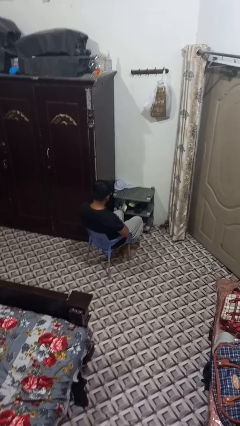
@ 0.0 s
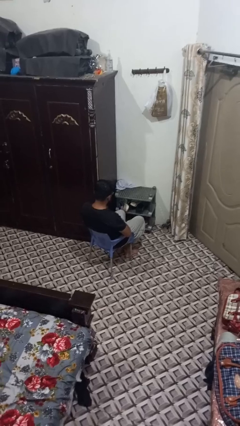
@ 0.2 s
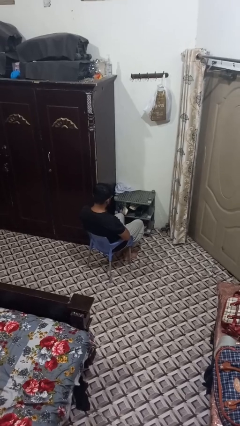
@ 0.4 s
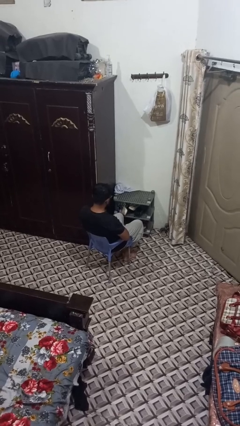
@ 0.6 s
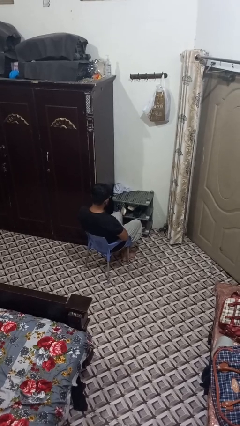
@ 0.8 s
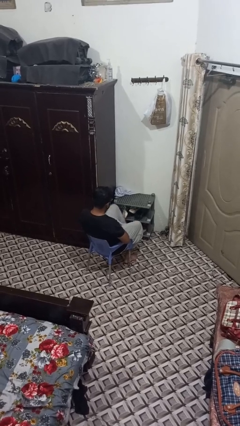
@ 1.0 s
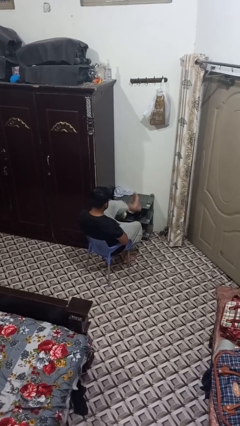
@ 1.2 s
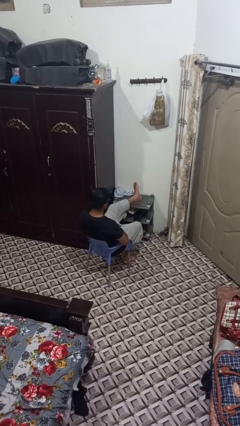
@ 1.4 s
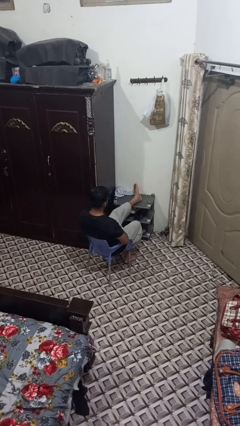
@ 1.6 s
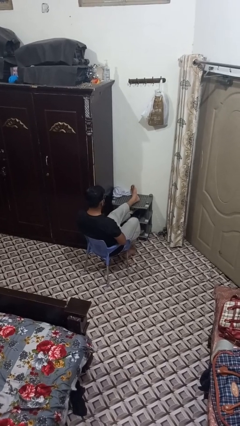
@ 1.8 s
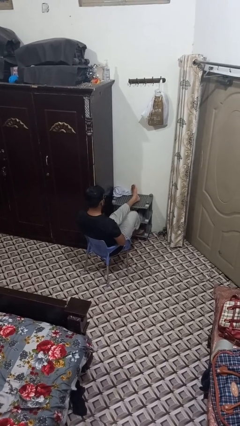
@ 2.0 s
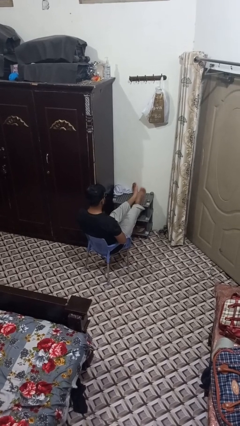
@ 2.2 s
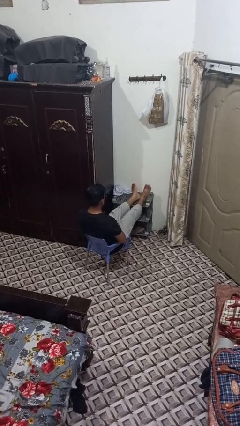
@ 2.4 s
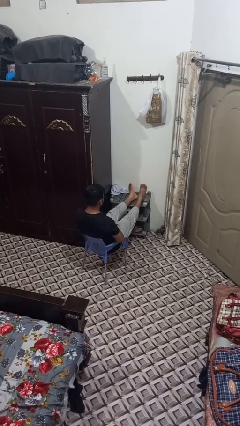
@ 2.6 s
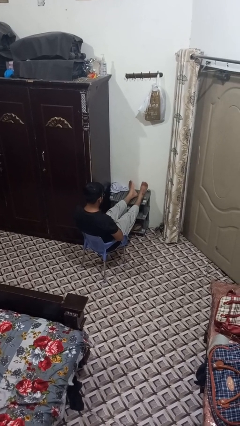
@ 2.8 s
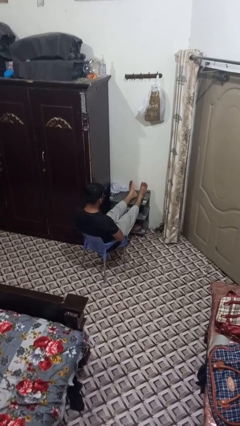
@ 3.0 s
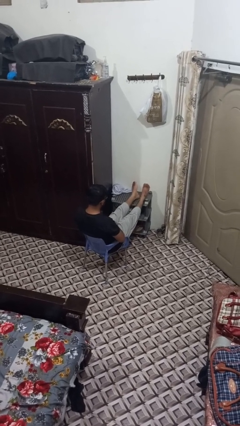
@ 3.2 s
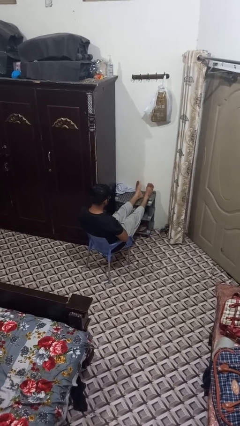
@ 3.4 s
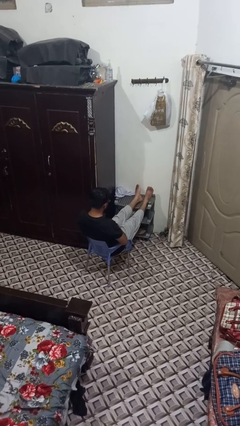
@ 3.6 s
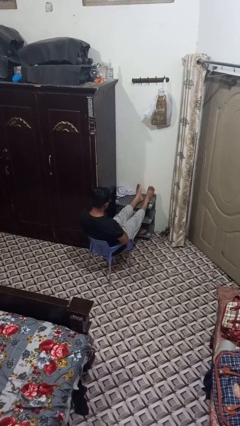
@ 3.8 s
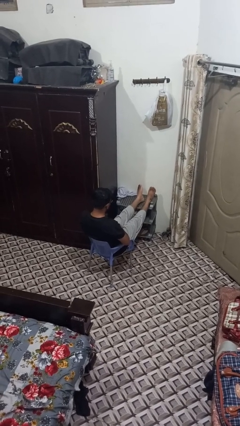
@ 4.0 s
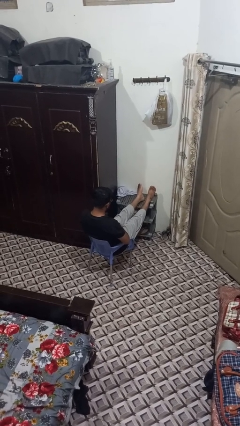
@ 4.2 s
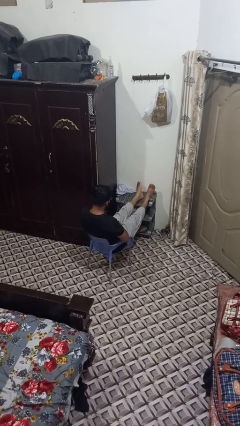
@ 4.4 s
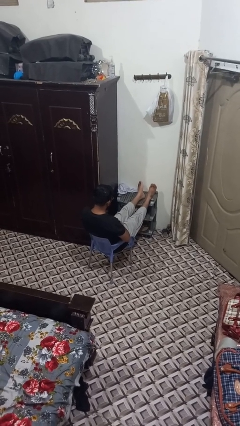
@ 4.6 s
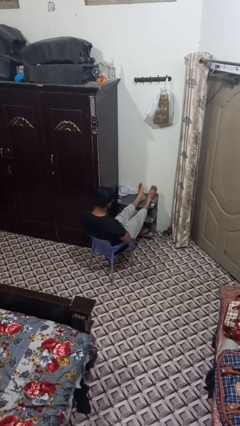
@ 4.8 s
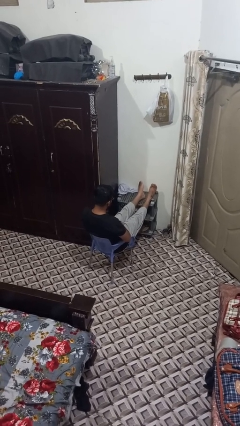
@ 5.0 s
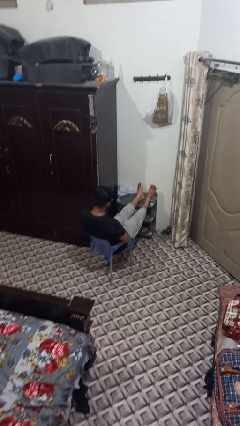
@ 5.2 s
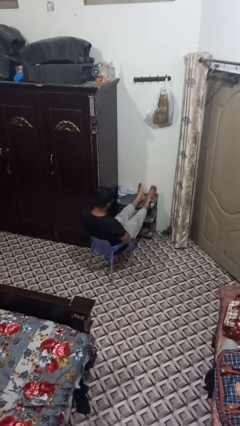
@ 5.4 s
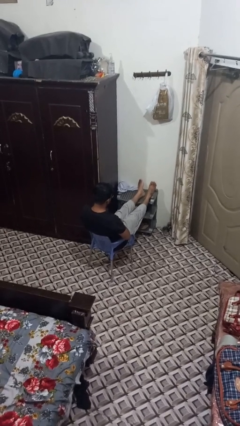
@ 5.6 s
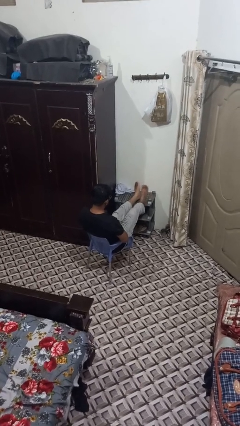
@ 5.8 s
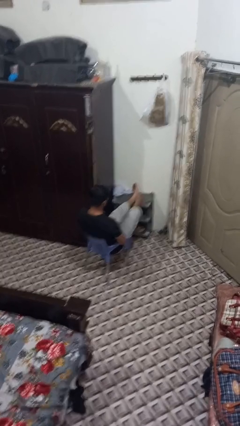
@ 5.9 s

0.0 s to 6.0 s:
person puts feet up

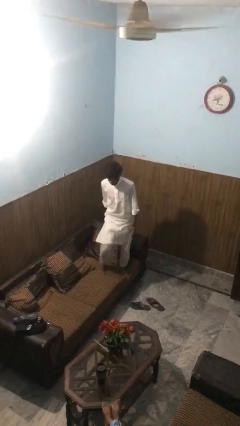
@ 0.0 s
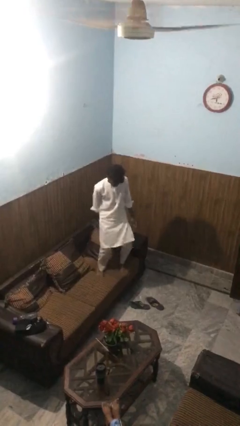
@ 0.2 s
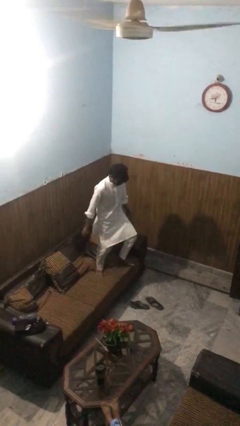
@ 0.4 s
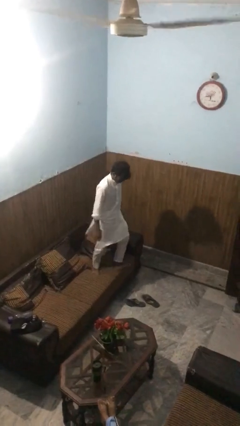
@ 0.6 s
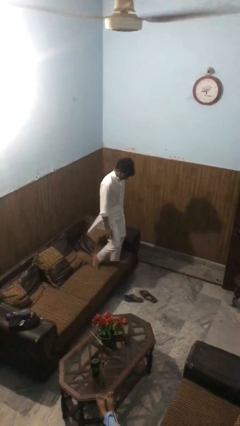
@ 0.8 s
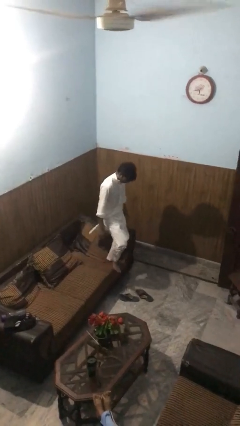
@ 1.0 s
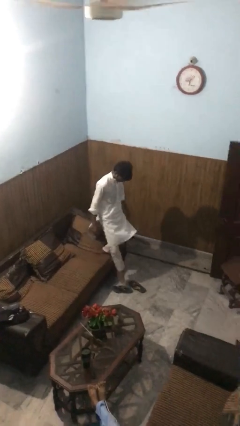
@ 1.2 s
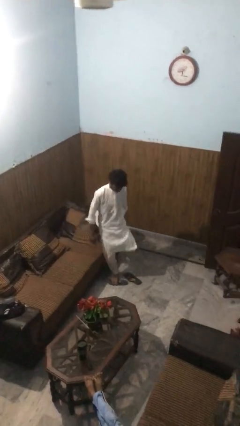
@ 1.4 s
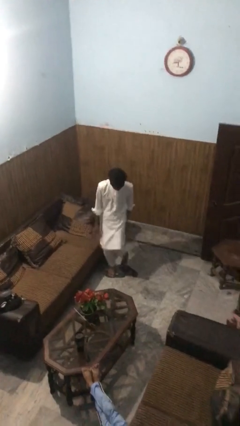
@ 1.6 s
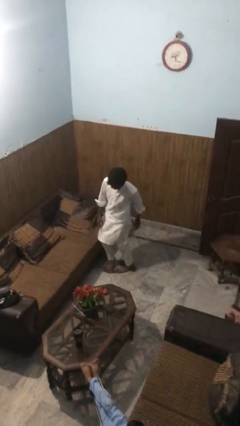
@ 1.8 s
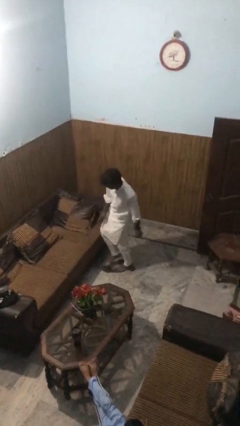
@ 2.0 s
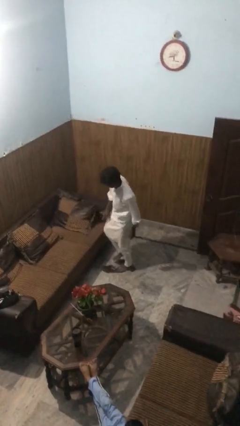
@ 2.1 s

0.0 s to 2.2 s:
person climbs off couch

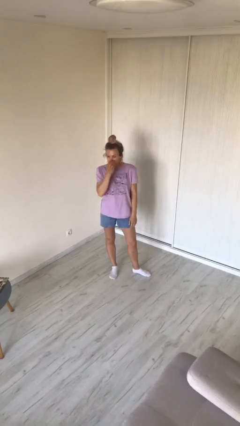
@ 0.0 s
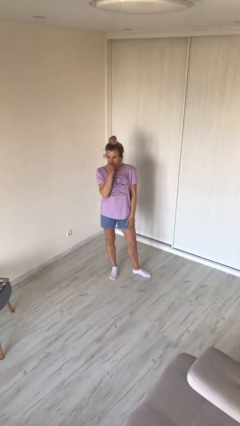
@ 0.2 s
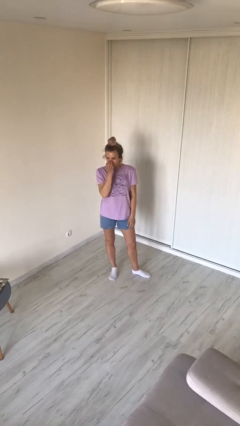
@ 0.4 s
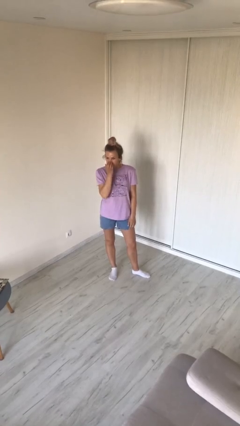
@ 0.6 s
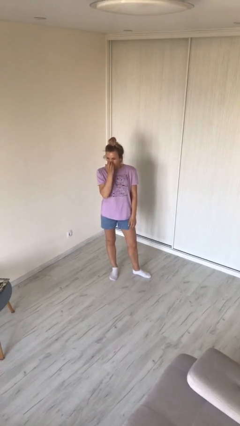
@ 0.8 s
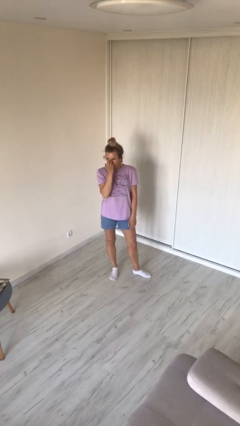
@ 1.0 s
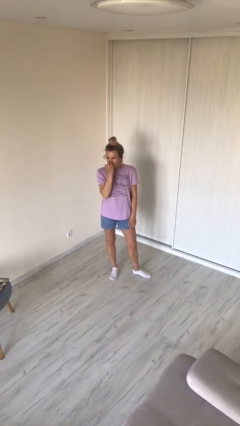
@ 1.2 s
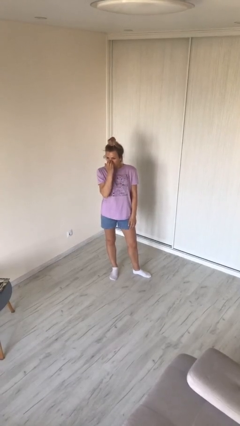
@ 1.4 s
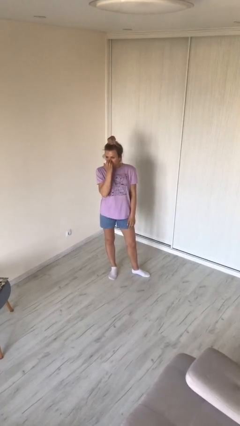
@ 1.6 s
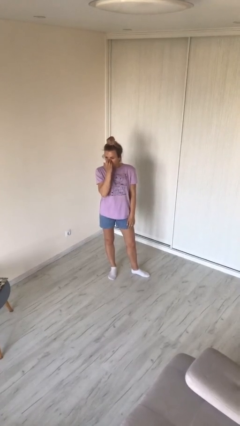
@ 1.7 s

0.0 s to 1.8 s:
person scratches face

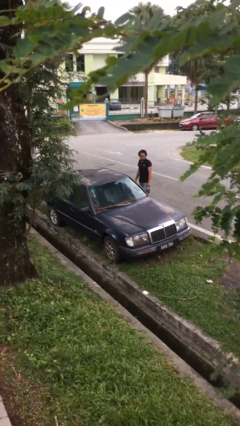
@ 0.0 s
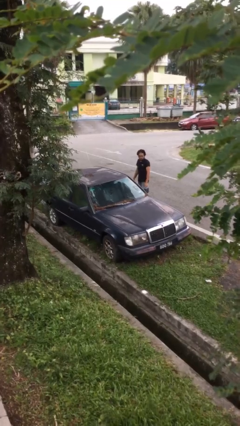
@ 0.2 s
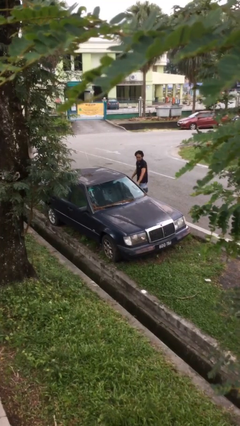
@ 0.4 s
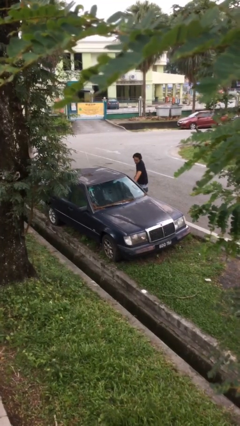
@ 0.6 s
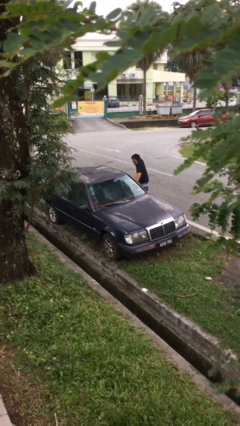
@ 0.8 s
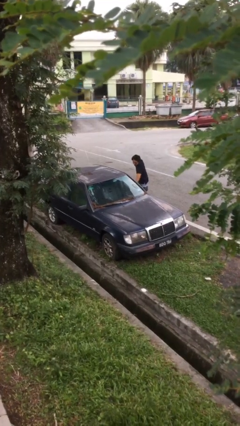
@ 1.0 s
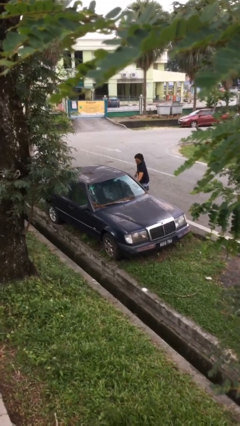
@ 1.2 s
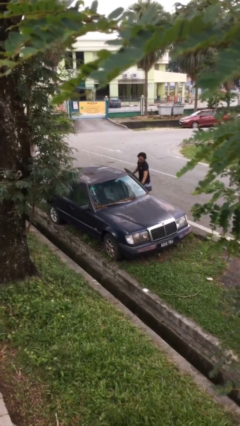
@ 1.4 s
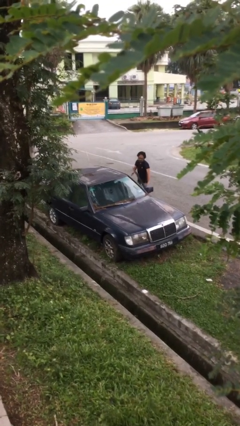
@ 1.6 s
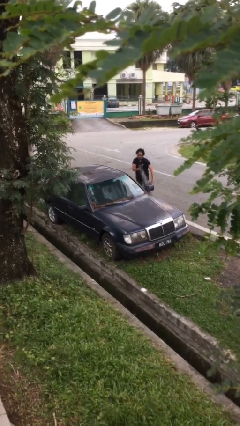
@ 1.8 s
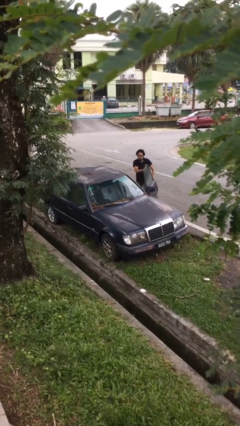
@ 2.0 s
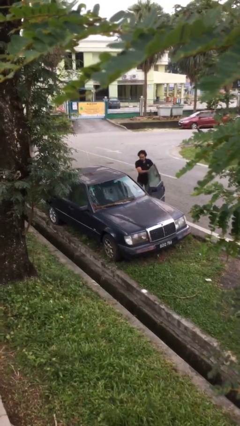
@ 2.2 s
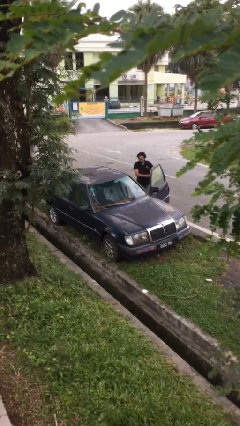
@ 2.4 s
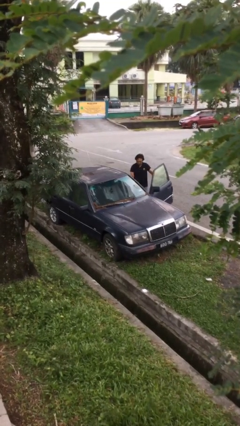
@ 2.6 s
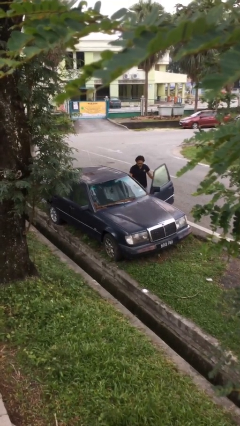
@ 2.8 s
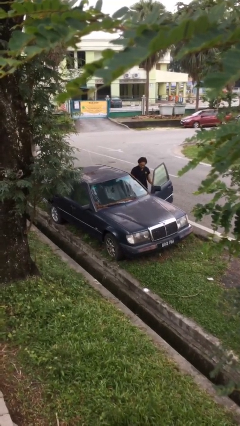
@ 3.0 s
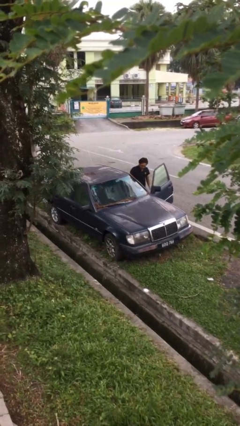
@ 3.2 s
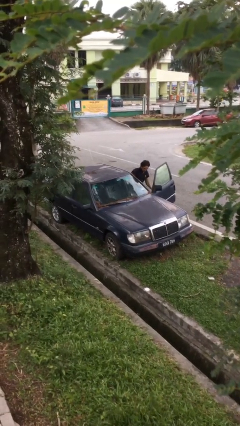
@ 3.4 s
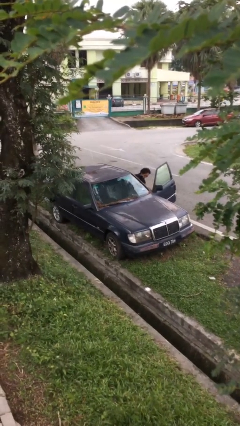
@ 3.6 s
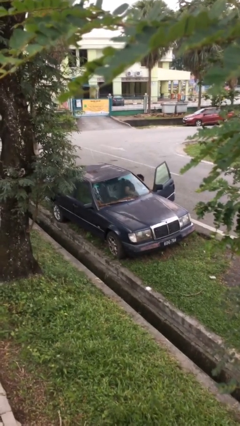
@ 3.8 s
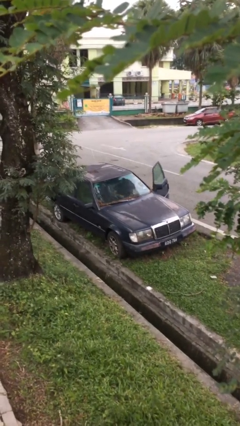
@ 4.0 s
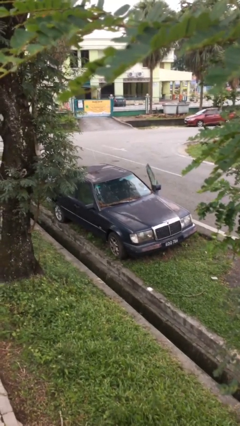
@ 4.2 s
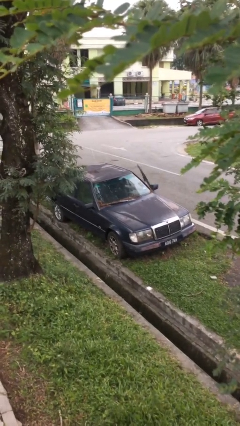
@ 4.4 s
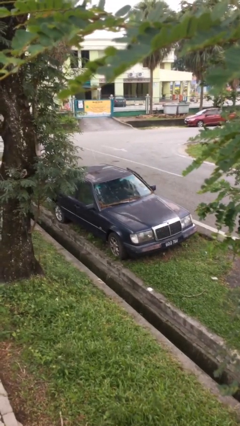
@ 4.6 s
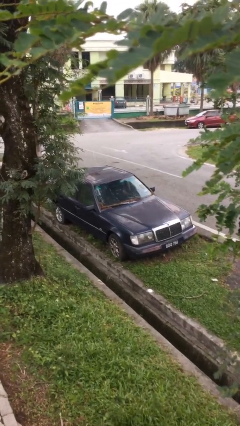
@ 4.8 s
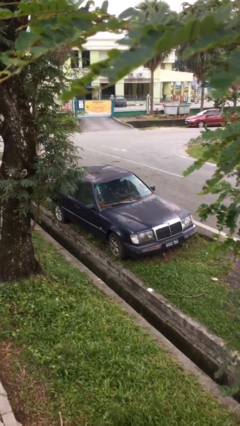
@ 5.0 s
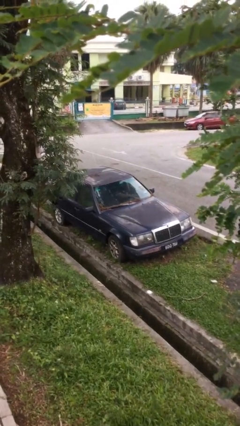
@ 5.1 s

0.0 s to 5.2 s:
car picks up person

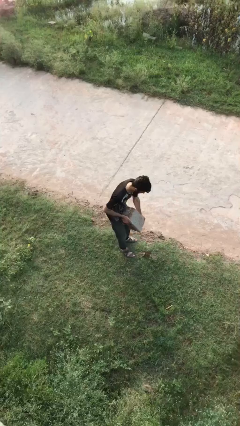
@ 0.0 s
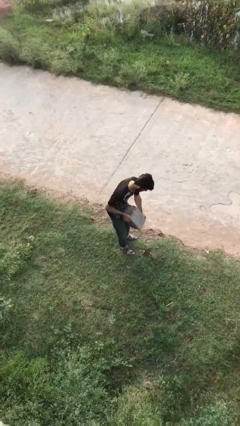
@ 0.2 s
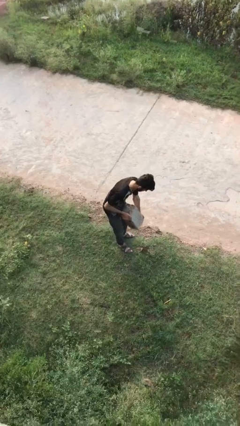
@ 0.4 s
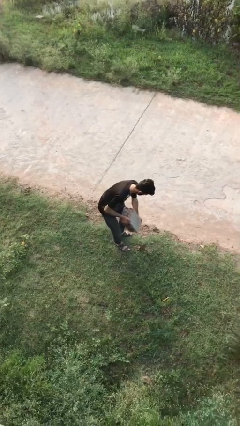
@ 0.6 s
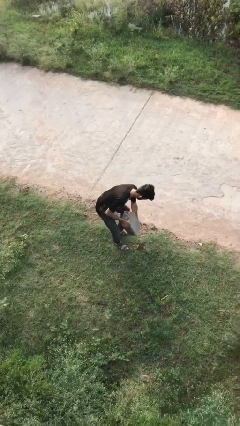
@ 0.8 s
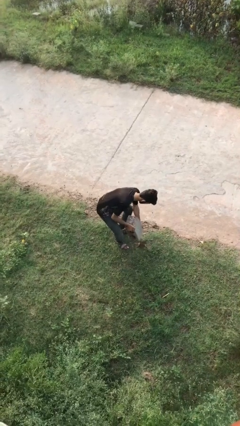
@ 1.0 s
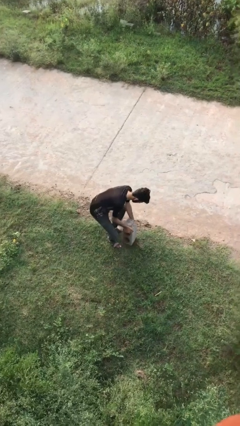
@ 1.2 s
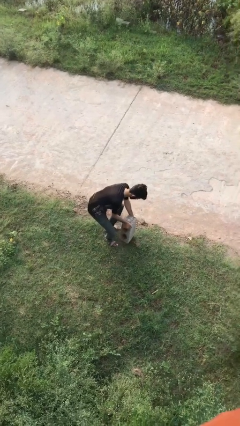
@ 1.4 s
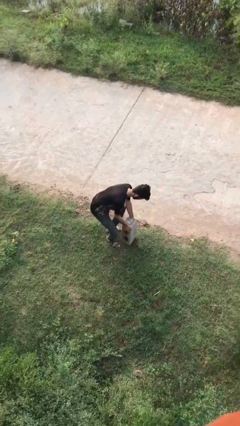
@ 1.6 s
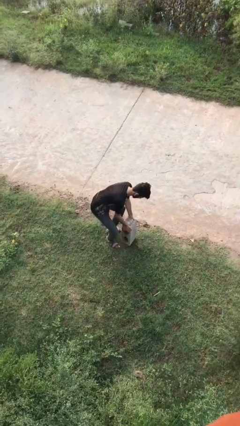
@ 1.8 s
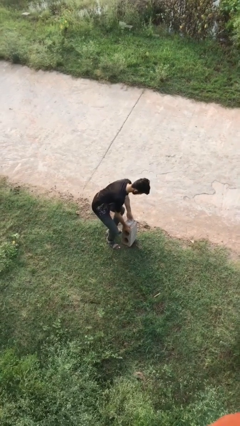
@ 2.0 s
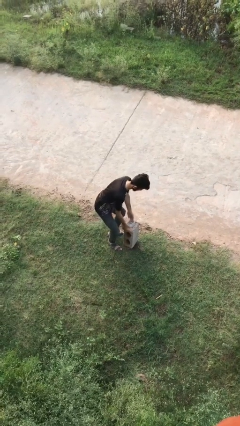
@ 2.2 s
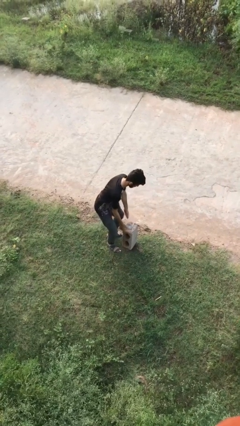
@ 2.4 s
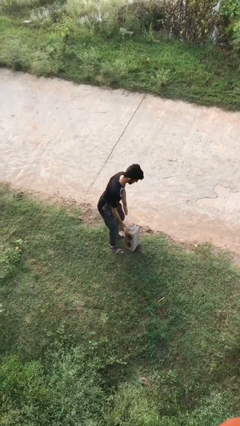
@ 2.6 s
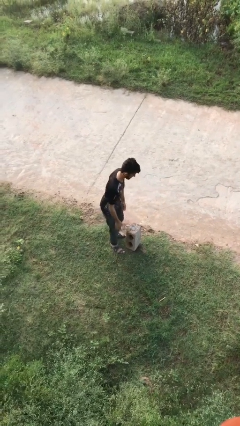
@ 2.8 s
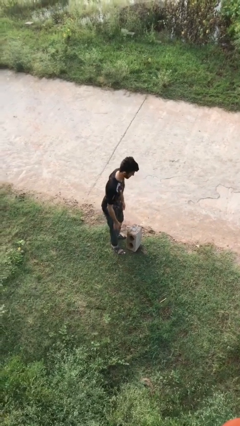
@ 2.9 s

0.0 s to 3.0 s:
person puts down object on floor
